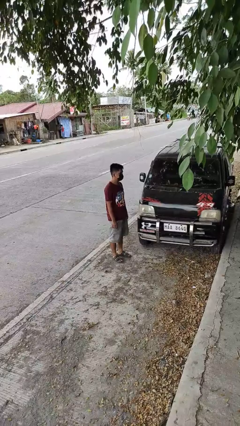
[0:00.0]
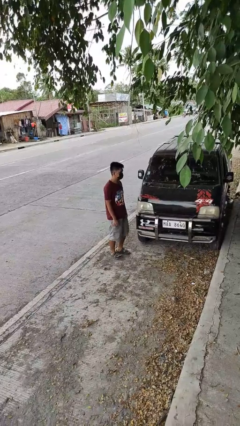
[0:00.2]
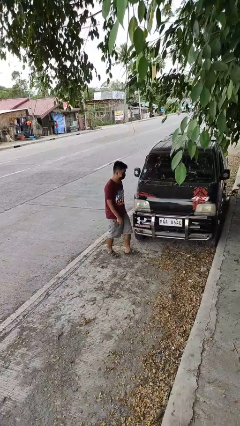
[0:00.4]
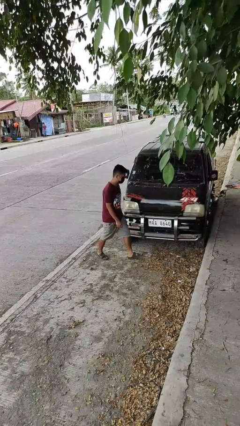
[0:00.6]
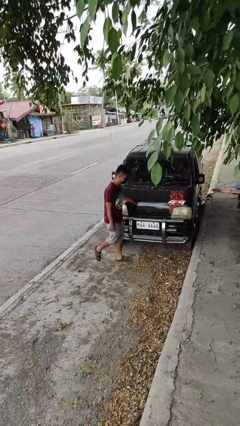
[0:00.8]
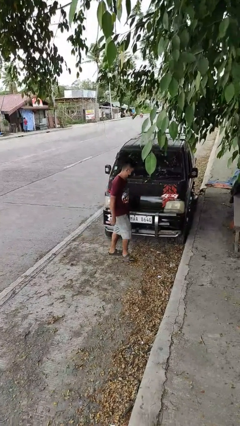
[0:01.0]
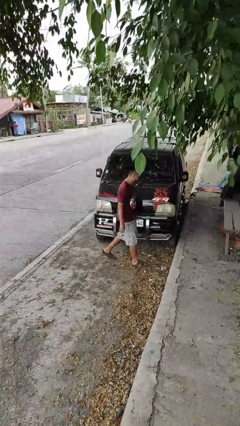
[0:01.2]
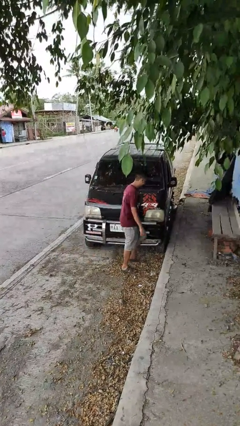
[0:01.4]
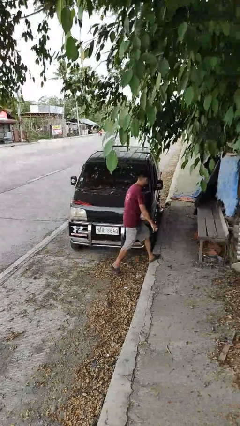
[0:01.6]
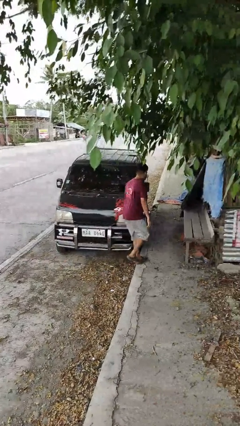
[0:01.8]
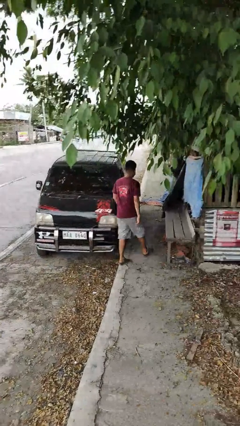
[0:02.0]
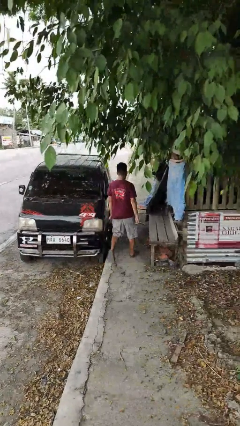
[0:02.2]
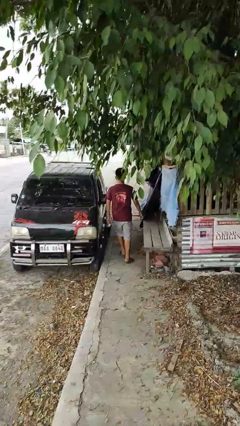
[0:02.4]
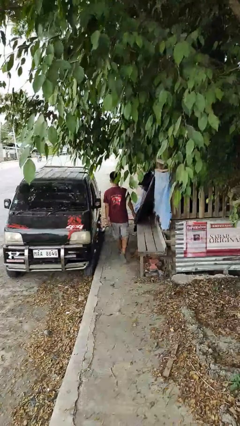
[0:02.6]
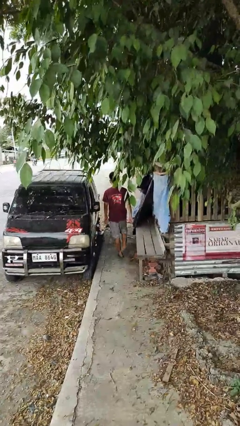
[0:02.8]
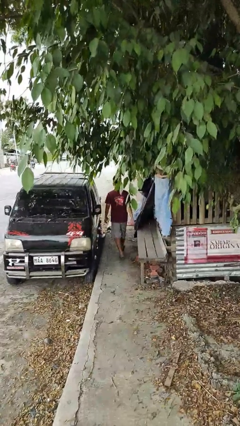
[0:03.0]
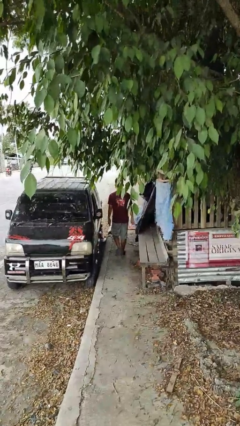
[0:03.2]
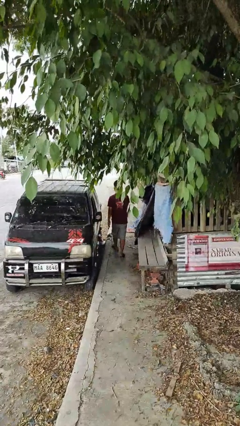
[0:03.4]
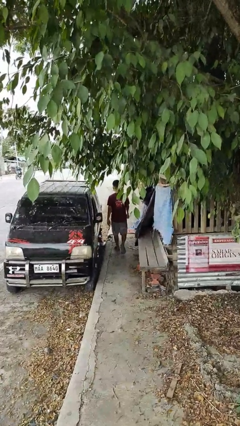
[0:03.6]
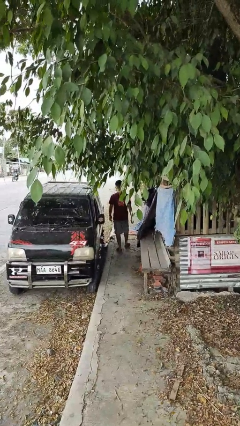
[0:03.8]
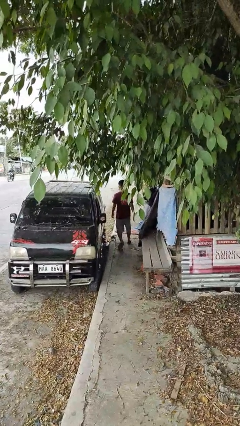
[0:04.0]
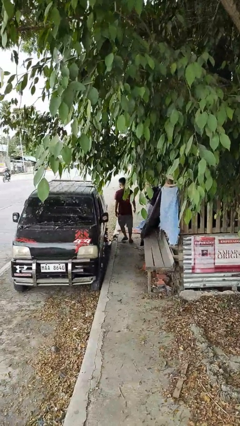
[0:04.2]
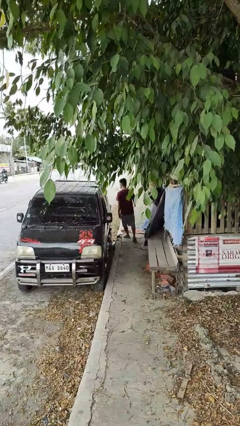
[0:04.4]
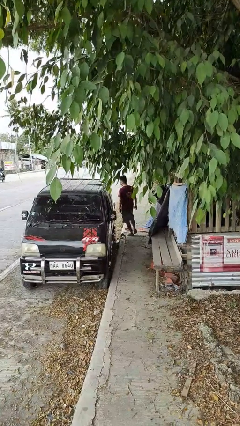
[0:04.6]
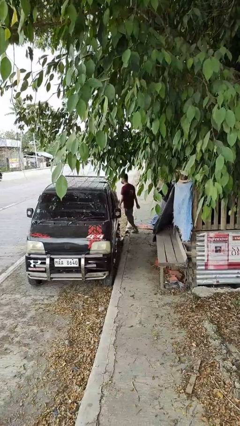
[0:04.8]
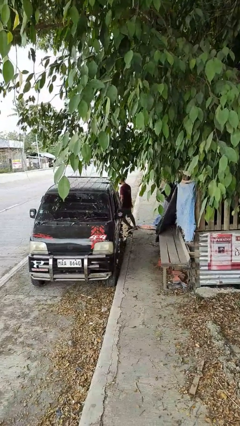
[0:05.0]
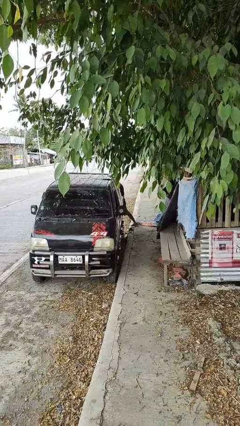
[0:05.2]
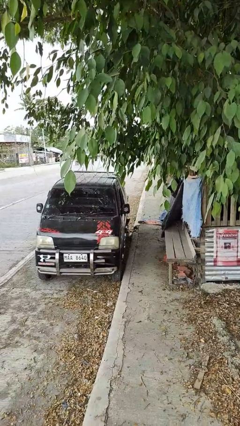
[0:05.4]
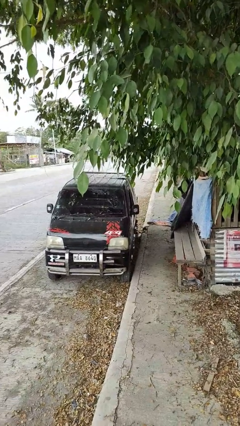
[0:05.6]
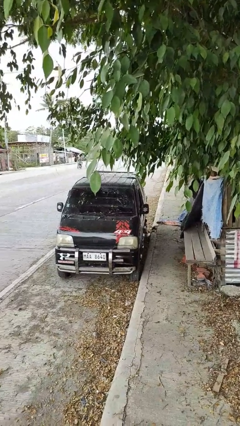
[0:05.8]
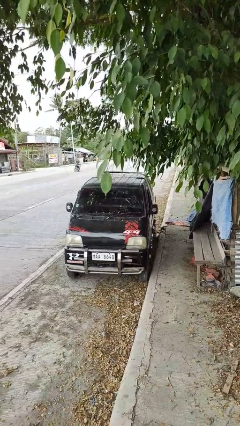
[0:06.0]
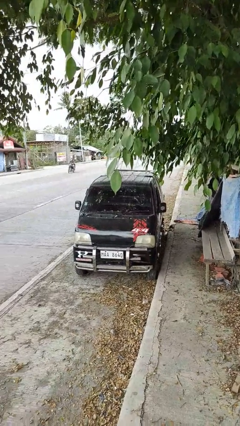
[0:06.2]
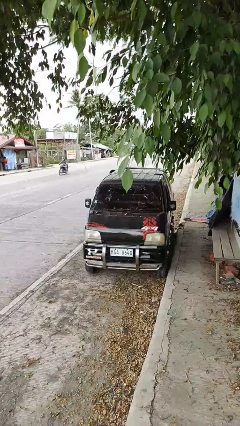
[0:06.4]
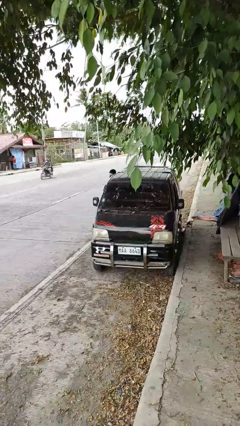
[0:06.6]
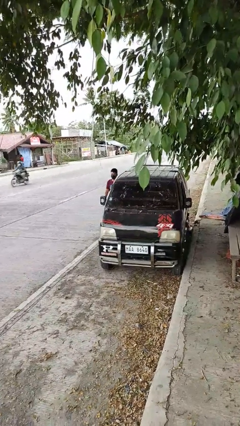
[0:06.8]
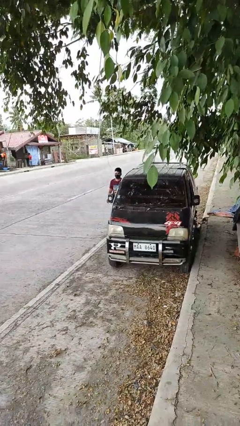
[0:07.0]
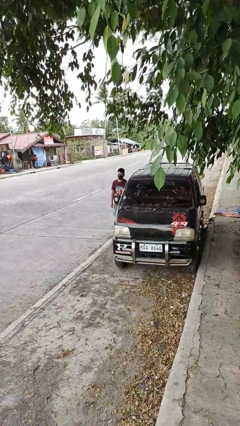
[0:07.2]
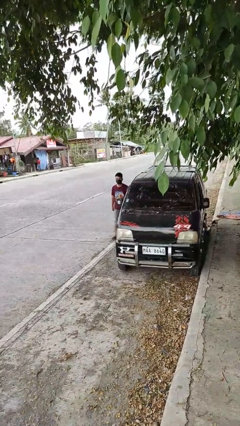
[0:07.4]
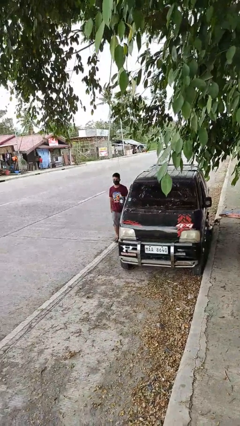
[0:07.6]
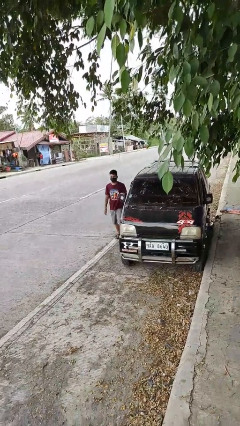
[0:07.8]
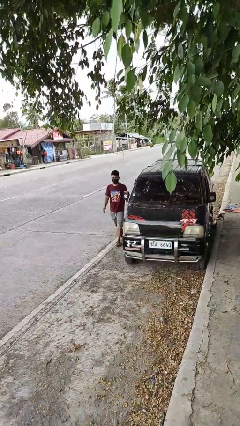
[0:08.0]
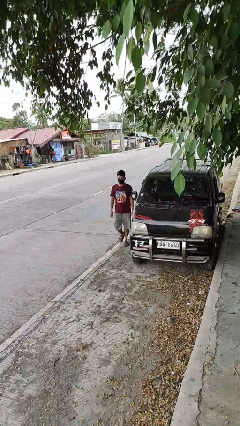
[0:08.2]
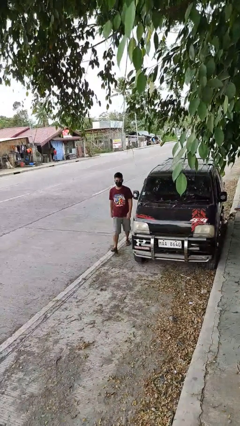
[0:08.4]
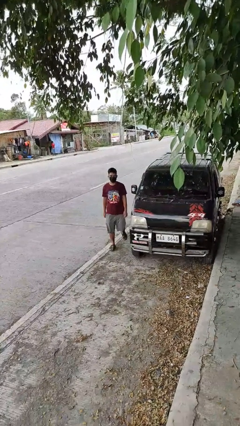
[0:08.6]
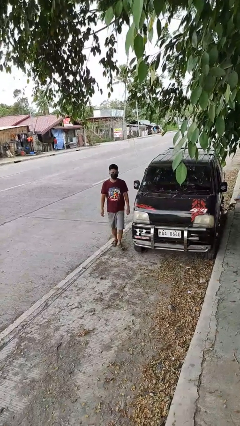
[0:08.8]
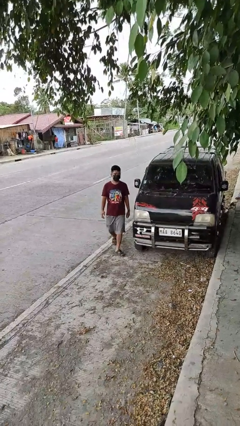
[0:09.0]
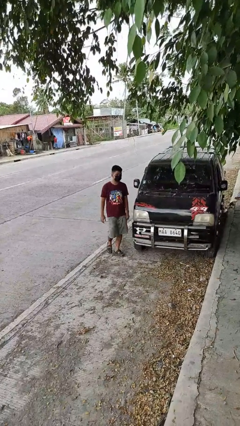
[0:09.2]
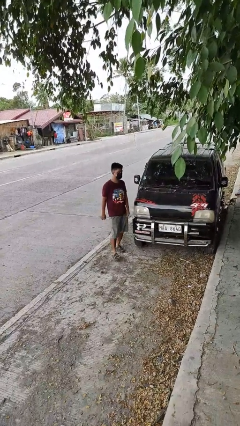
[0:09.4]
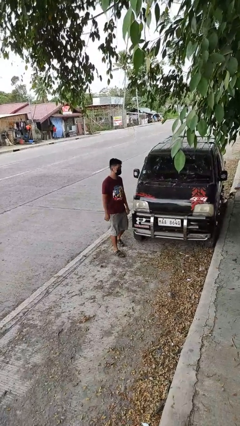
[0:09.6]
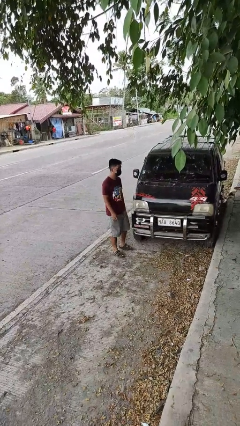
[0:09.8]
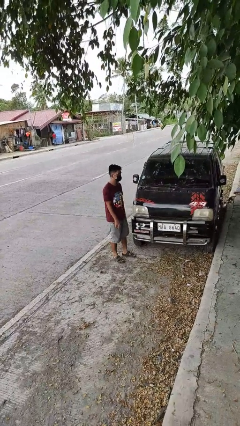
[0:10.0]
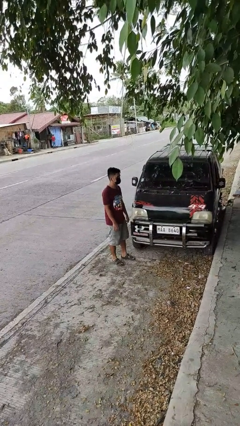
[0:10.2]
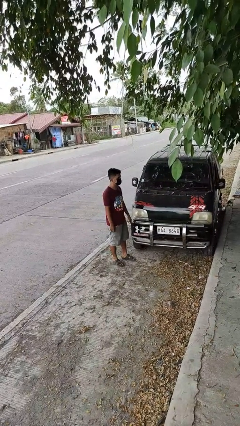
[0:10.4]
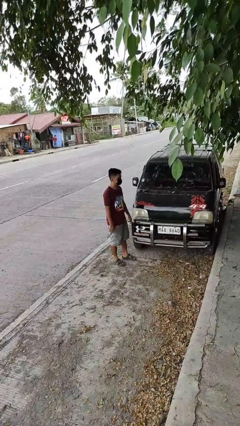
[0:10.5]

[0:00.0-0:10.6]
person walks around car

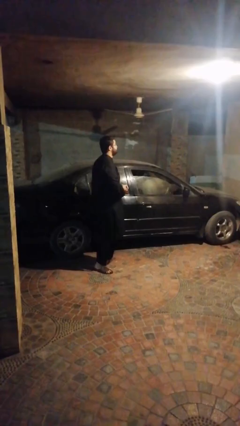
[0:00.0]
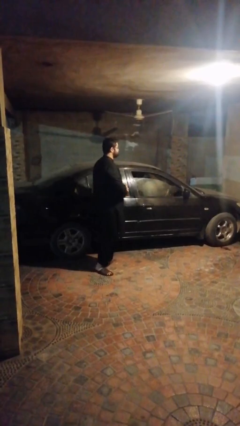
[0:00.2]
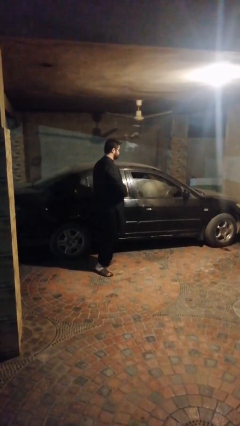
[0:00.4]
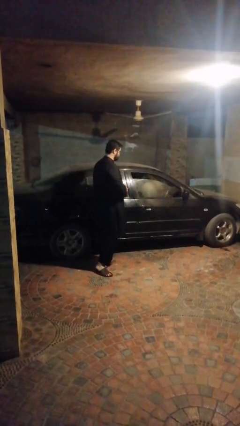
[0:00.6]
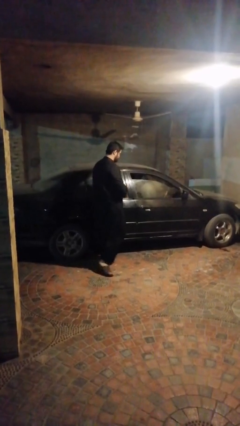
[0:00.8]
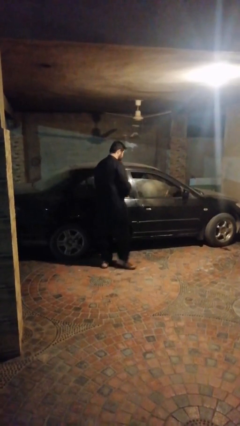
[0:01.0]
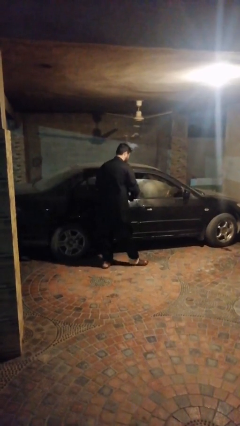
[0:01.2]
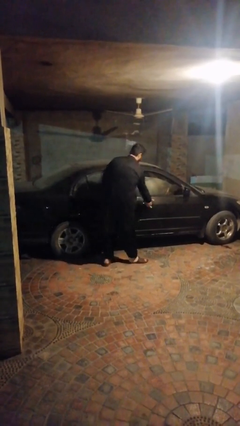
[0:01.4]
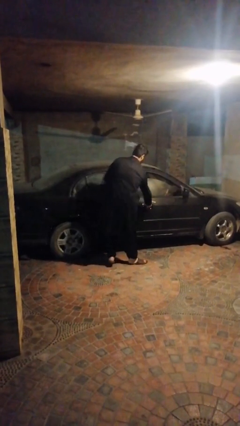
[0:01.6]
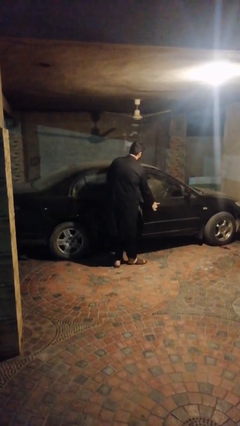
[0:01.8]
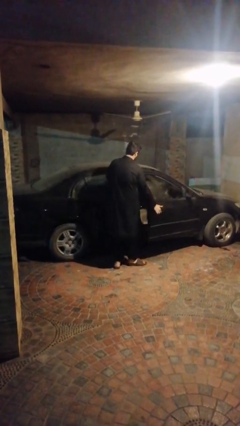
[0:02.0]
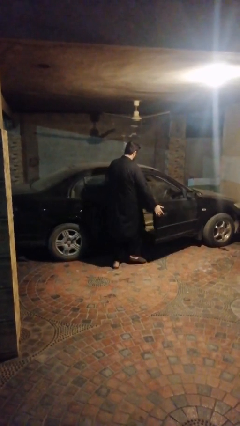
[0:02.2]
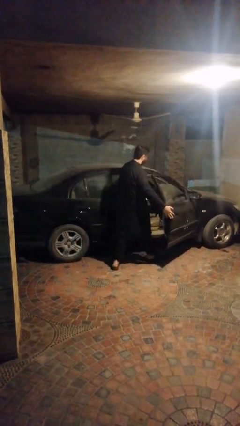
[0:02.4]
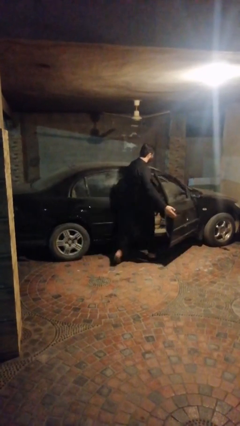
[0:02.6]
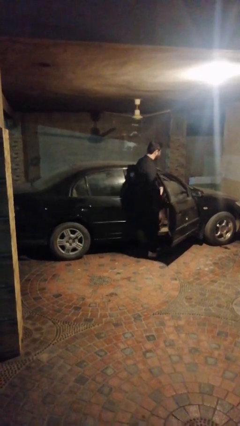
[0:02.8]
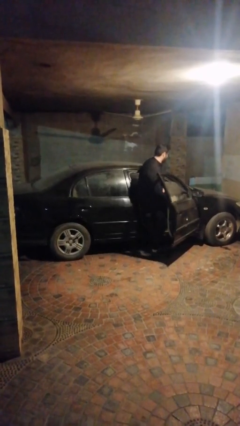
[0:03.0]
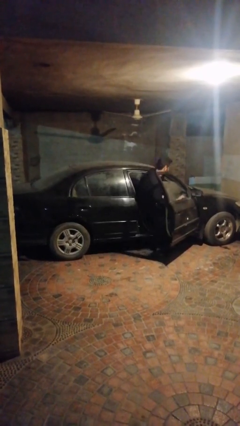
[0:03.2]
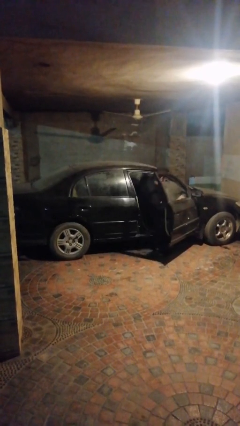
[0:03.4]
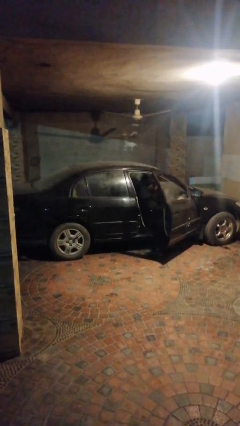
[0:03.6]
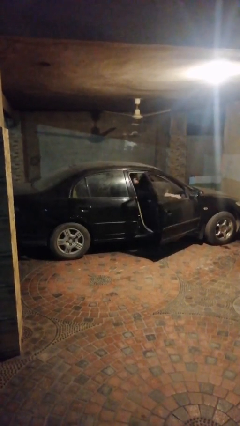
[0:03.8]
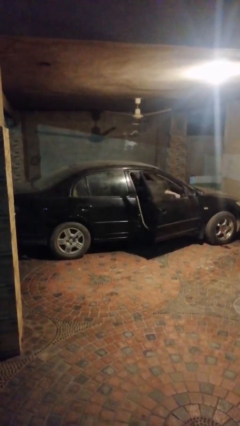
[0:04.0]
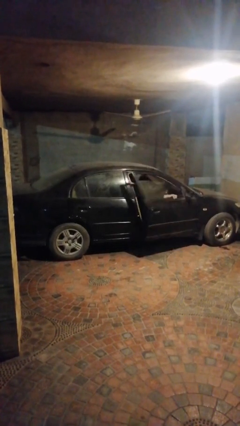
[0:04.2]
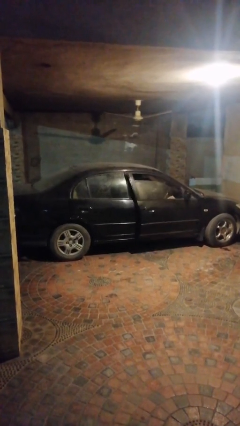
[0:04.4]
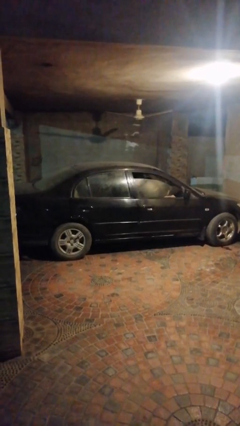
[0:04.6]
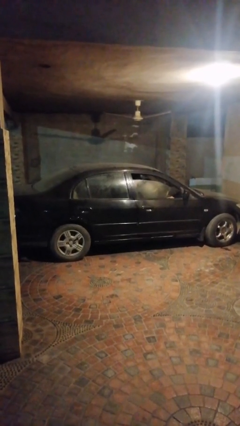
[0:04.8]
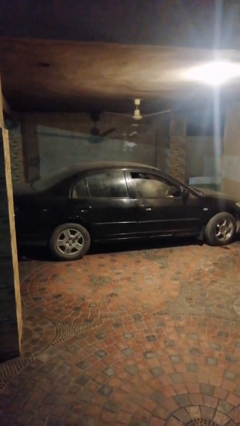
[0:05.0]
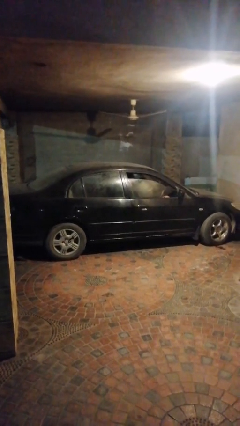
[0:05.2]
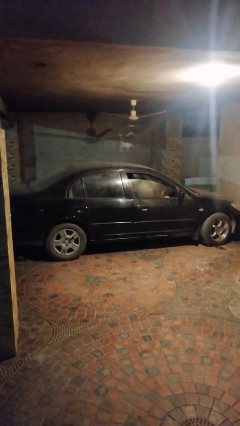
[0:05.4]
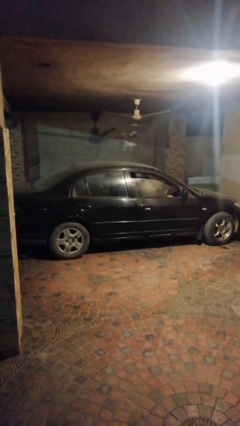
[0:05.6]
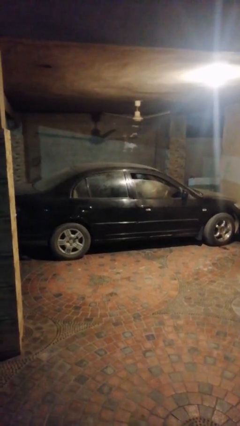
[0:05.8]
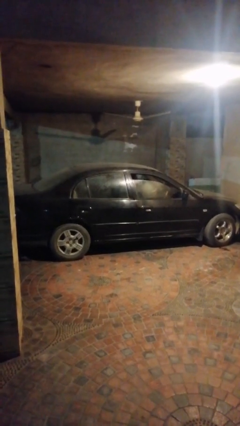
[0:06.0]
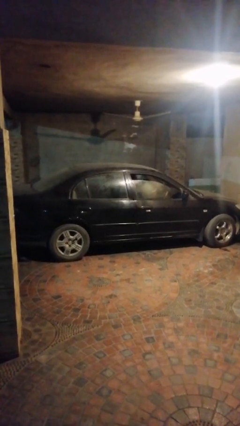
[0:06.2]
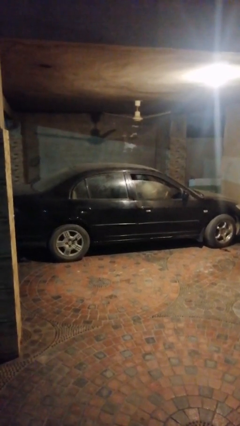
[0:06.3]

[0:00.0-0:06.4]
car picks up person

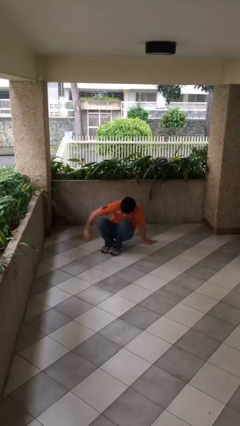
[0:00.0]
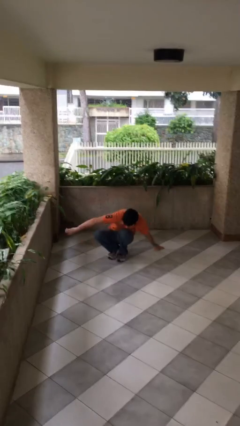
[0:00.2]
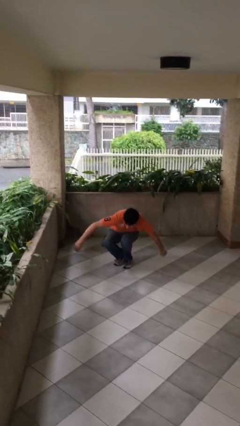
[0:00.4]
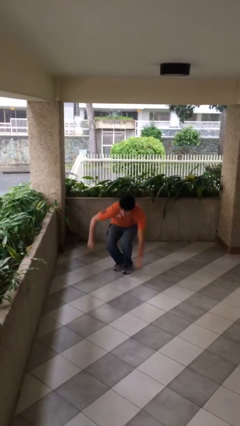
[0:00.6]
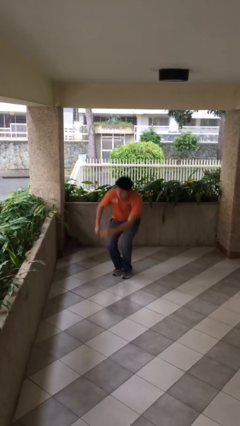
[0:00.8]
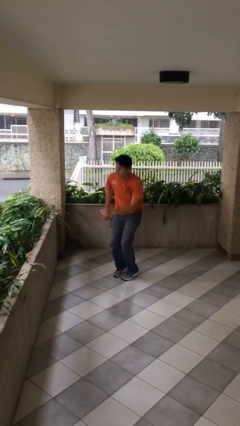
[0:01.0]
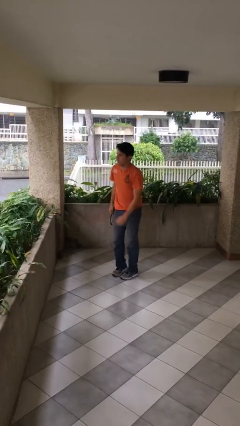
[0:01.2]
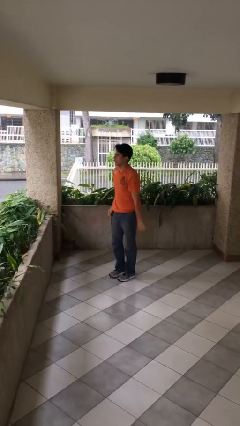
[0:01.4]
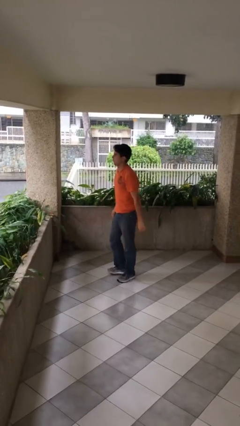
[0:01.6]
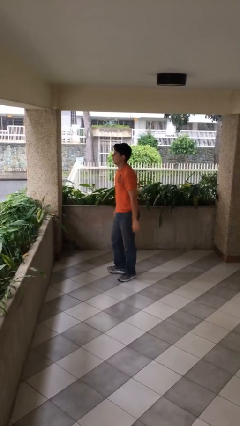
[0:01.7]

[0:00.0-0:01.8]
person stands up
